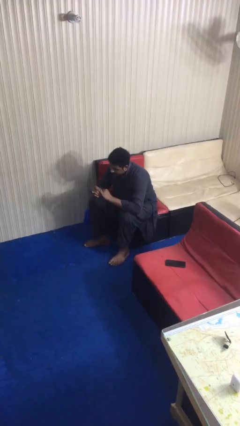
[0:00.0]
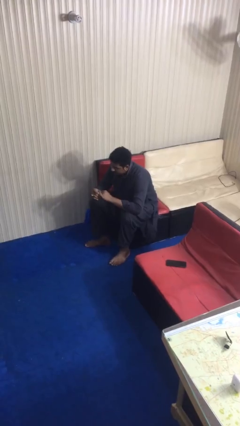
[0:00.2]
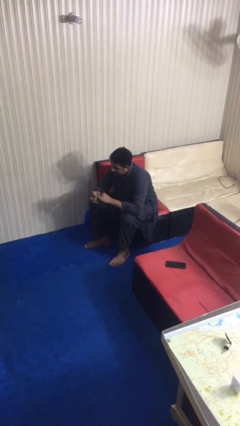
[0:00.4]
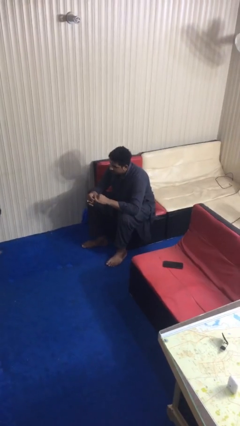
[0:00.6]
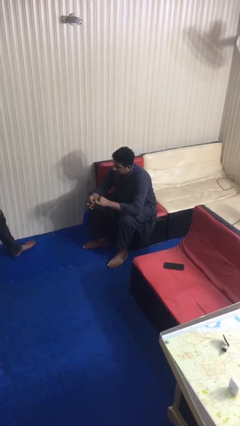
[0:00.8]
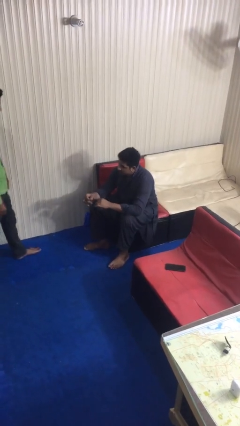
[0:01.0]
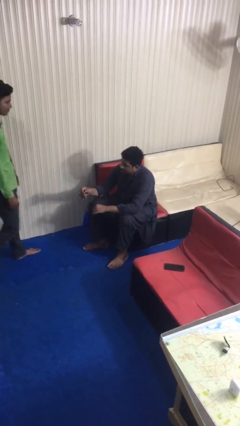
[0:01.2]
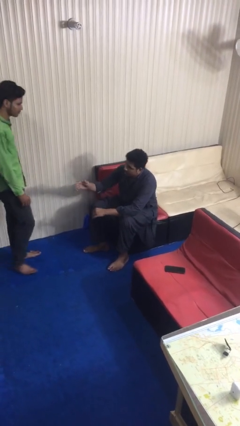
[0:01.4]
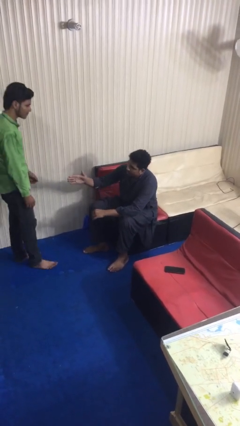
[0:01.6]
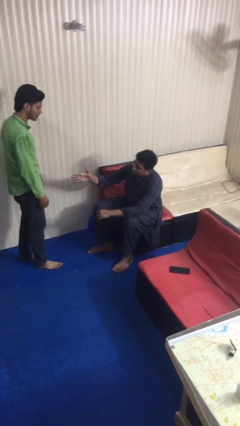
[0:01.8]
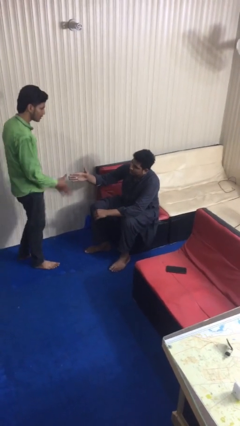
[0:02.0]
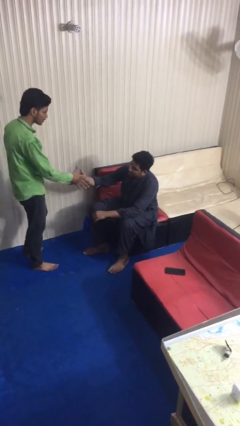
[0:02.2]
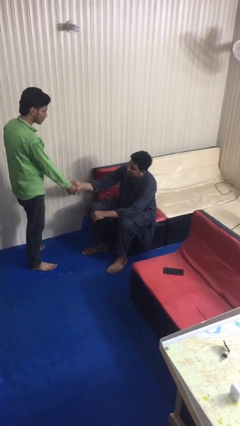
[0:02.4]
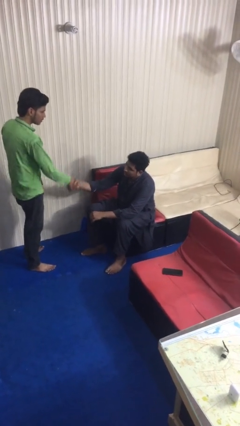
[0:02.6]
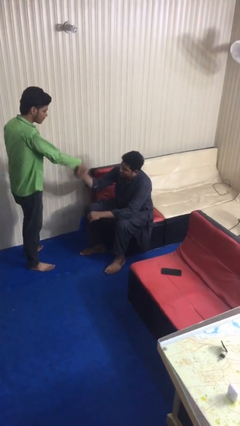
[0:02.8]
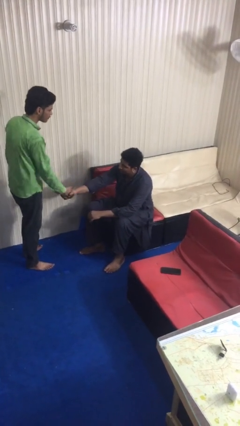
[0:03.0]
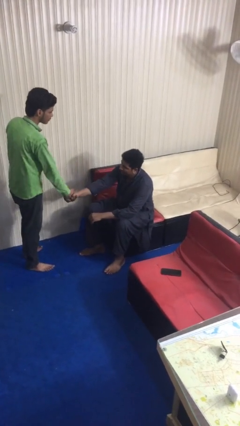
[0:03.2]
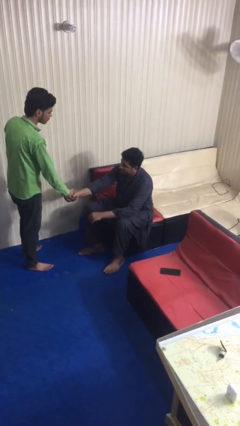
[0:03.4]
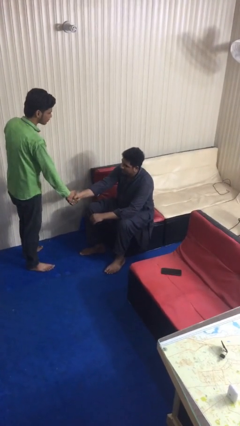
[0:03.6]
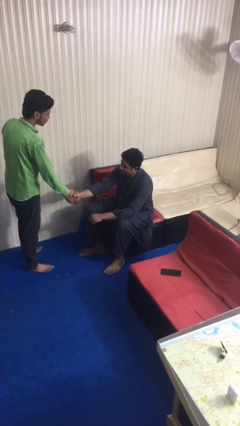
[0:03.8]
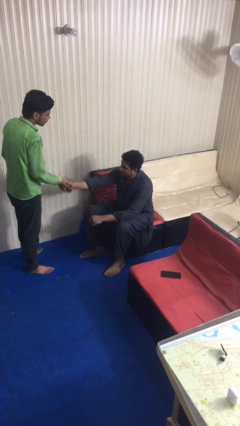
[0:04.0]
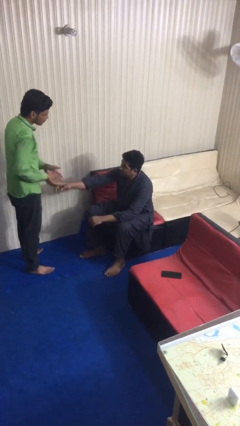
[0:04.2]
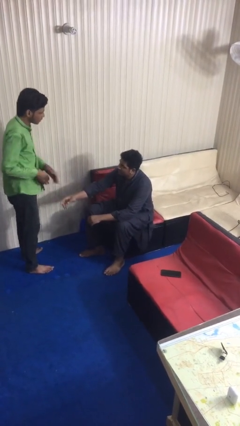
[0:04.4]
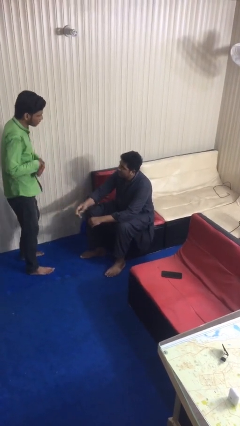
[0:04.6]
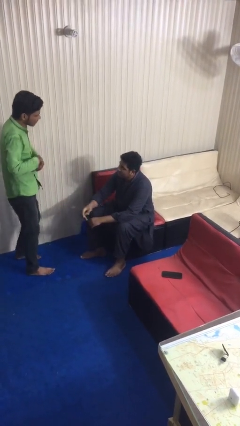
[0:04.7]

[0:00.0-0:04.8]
person shakes hand

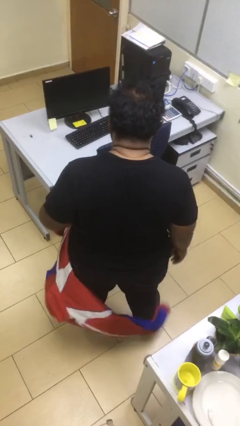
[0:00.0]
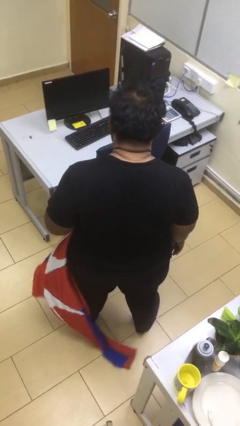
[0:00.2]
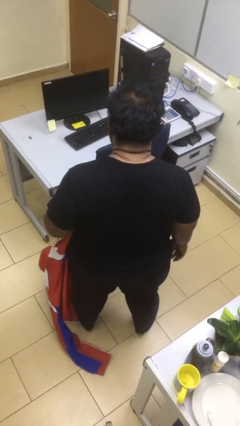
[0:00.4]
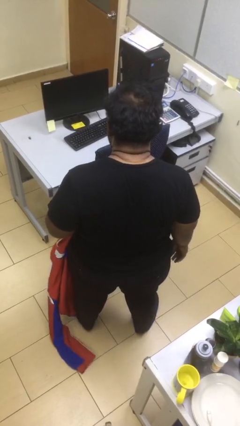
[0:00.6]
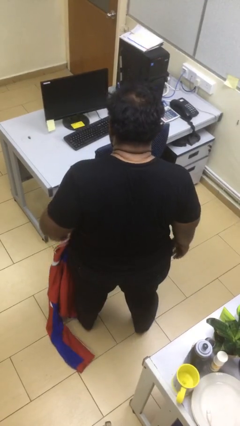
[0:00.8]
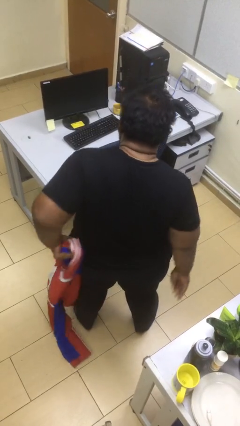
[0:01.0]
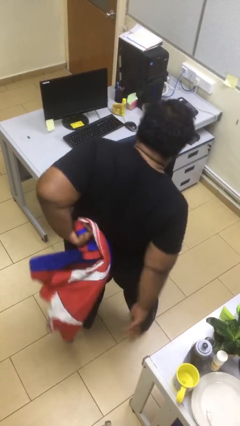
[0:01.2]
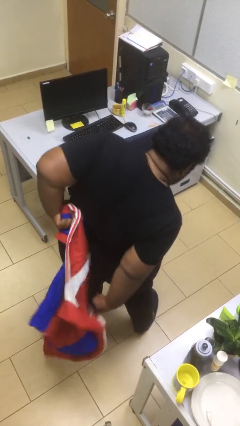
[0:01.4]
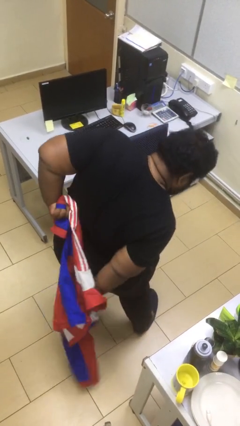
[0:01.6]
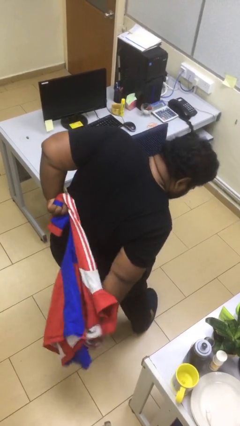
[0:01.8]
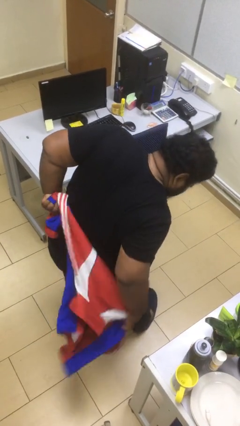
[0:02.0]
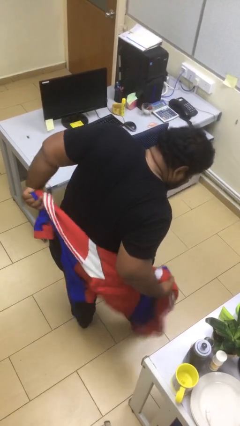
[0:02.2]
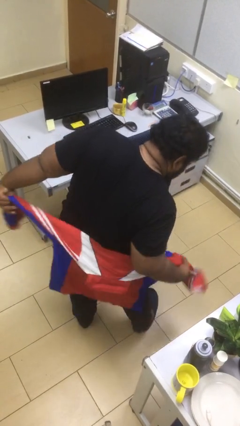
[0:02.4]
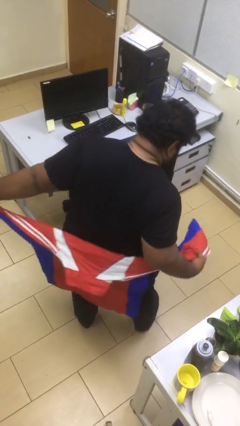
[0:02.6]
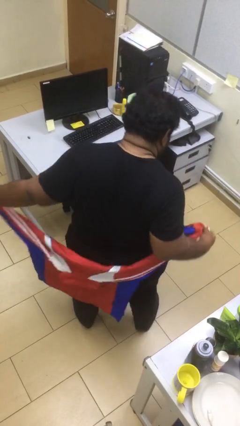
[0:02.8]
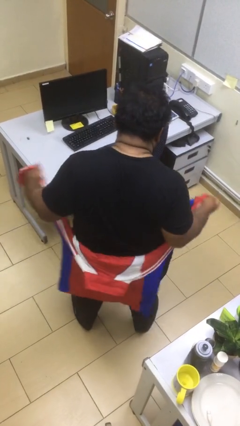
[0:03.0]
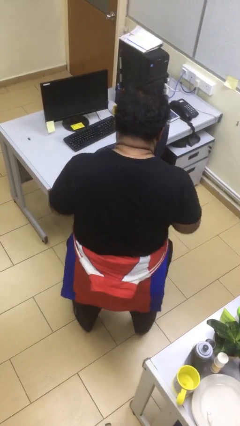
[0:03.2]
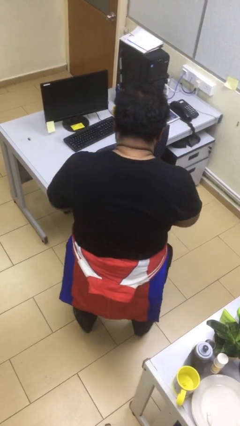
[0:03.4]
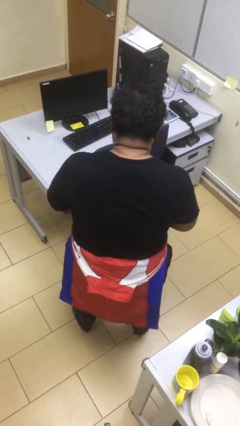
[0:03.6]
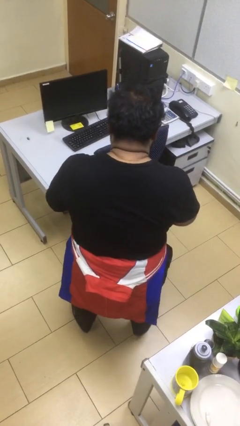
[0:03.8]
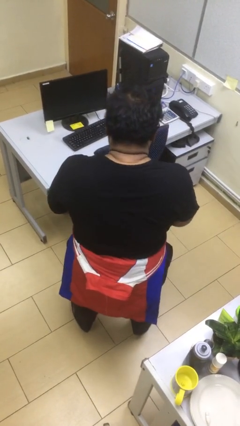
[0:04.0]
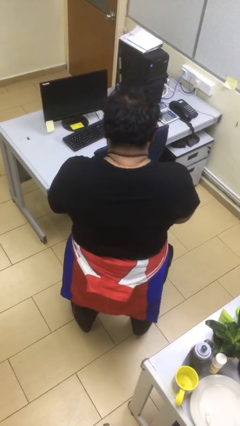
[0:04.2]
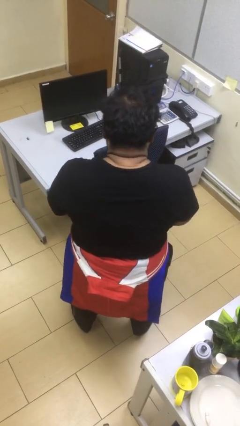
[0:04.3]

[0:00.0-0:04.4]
person ties jacket around waist

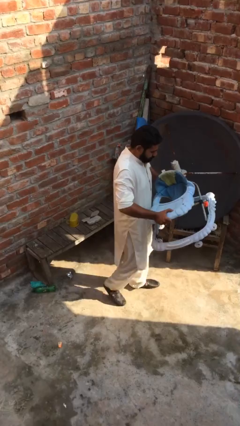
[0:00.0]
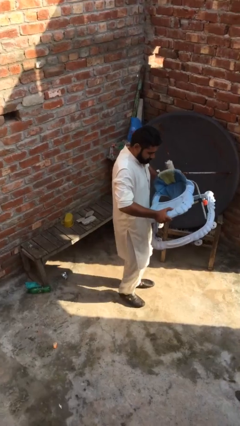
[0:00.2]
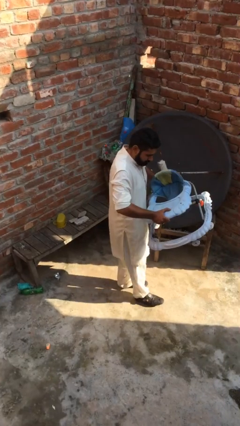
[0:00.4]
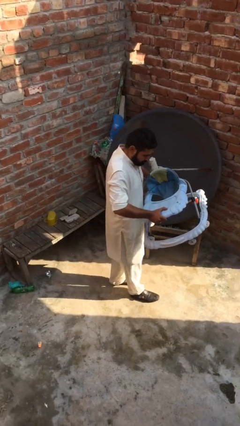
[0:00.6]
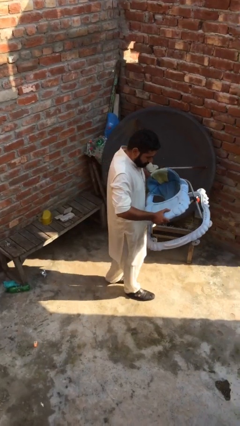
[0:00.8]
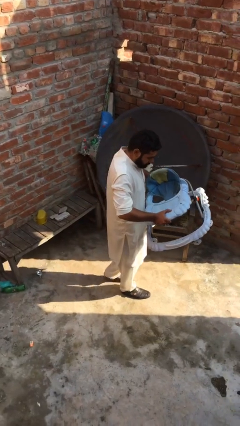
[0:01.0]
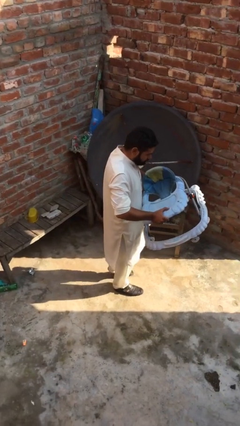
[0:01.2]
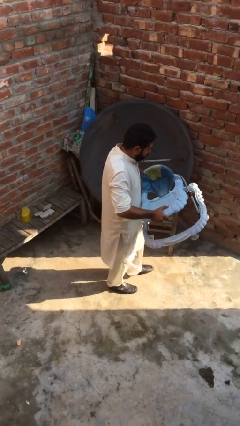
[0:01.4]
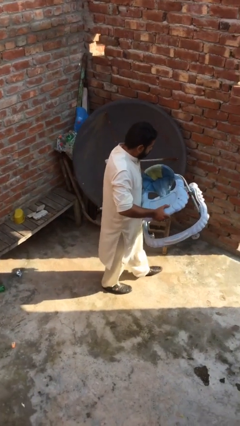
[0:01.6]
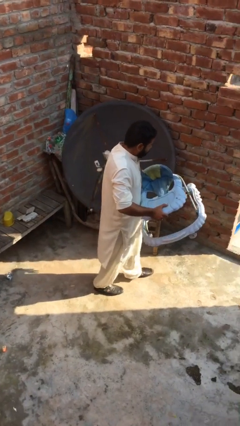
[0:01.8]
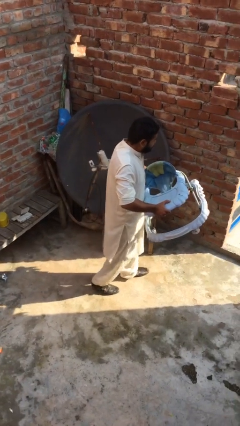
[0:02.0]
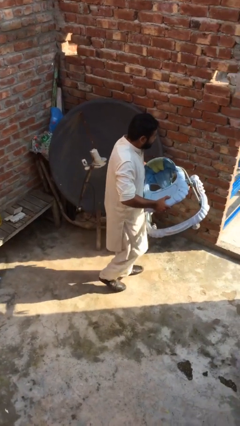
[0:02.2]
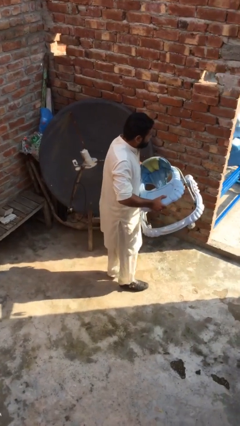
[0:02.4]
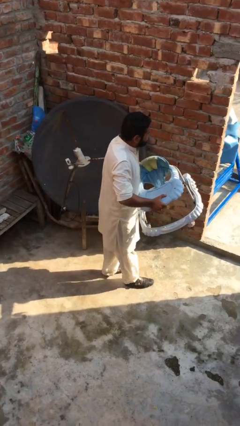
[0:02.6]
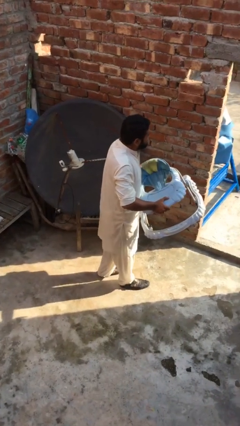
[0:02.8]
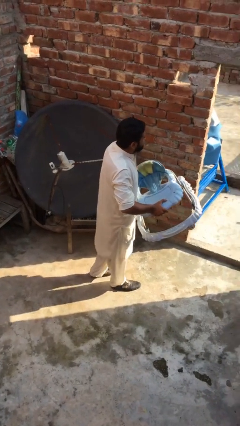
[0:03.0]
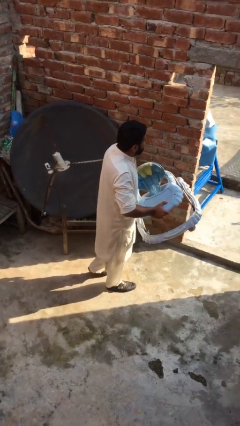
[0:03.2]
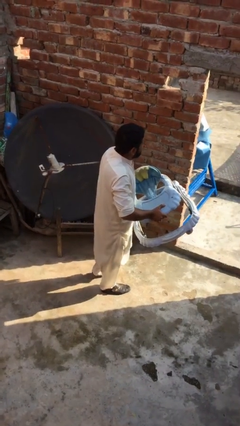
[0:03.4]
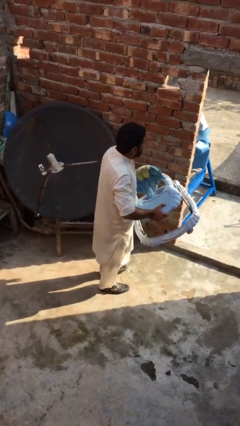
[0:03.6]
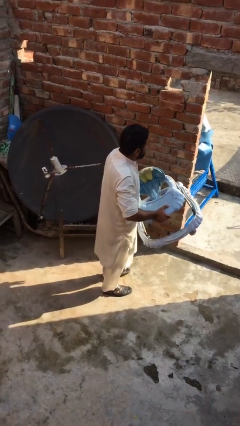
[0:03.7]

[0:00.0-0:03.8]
person carries heavy object

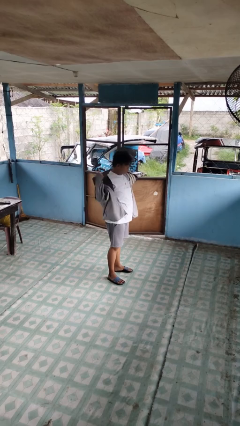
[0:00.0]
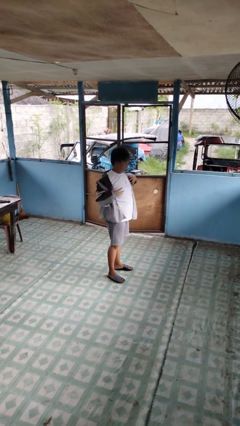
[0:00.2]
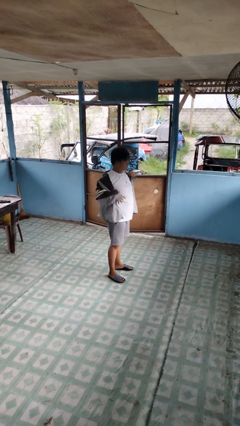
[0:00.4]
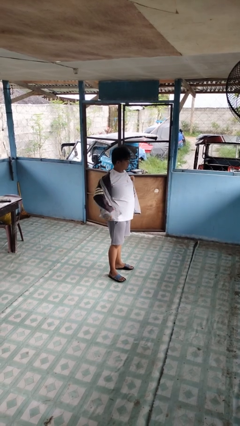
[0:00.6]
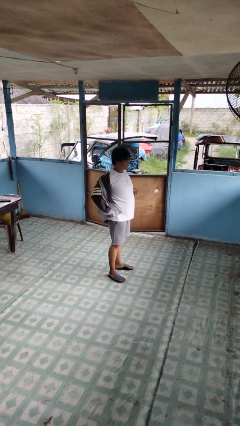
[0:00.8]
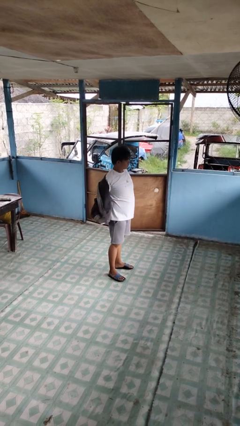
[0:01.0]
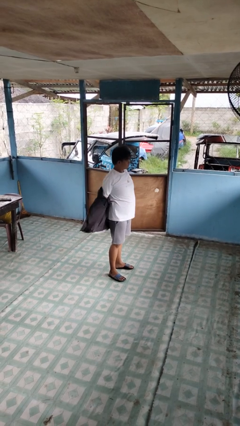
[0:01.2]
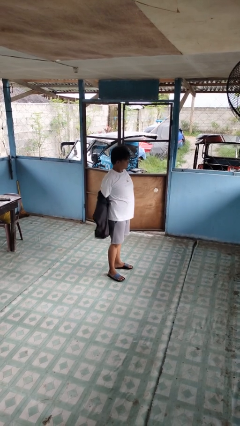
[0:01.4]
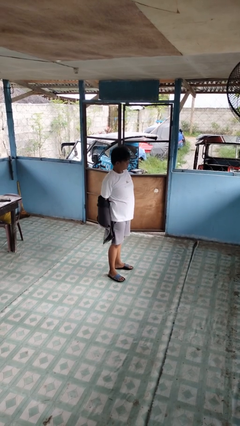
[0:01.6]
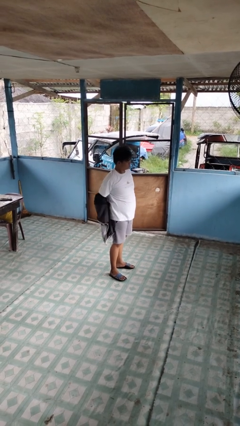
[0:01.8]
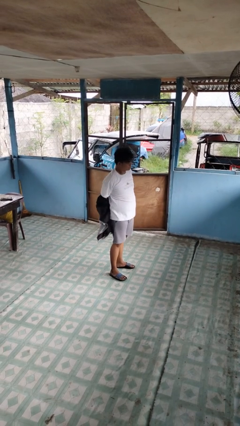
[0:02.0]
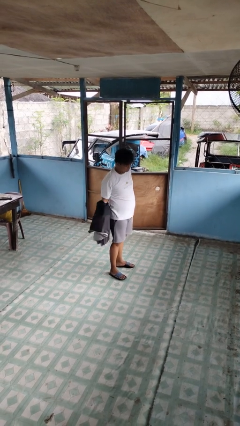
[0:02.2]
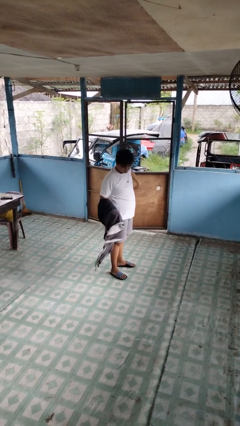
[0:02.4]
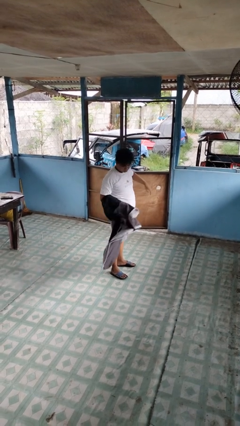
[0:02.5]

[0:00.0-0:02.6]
person takes off hoodie

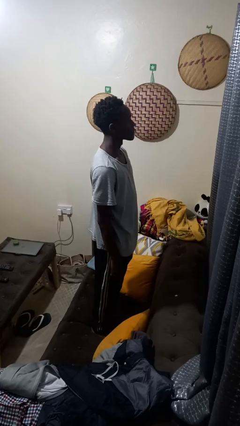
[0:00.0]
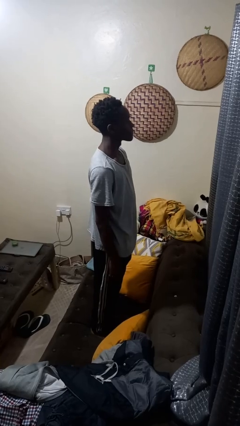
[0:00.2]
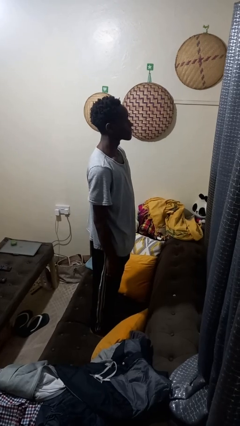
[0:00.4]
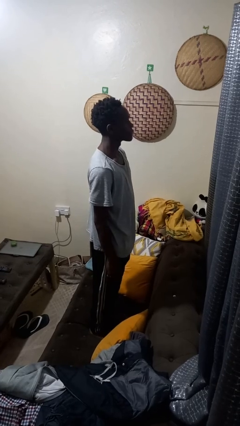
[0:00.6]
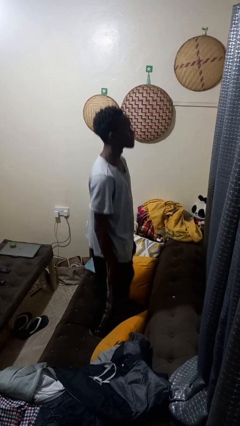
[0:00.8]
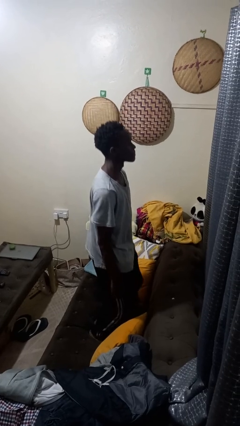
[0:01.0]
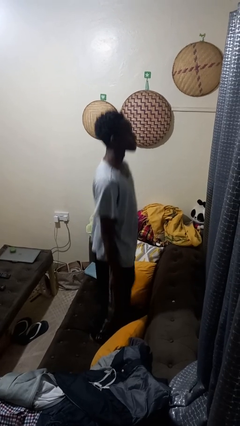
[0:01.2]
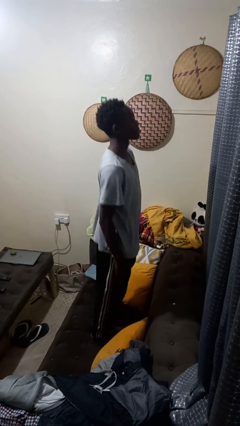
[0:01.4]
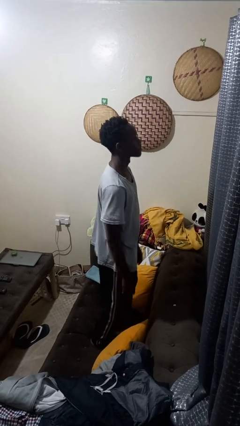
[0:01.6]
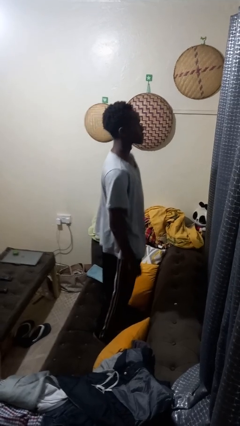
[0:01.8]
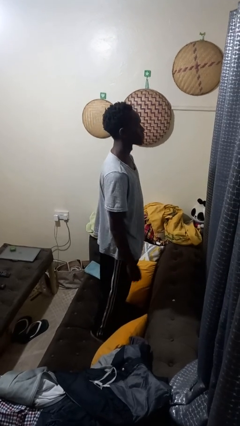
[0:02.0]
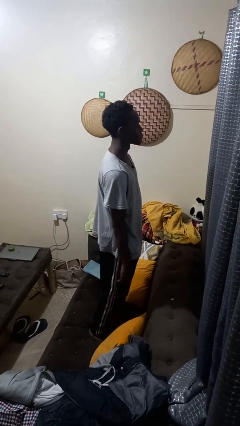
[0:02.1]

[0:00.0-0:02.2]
person jumps on couch

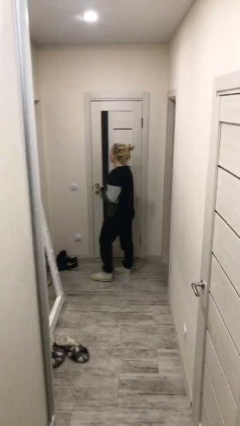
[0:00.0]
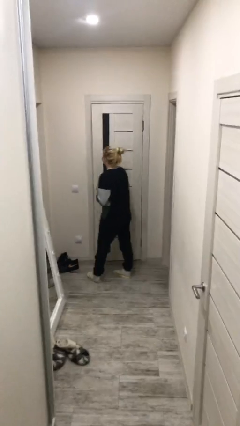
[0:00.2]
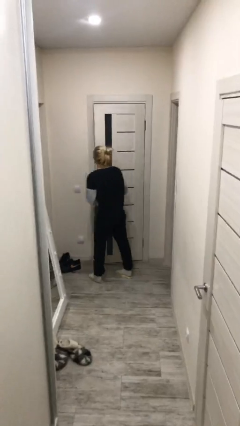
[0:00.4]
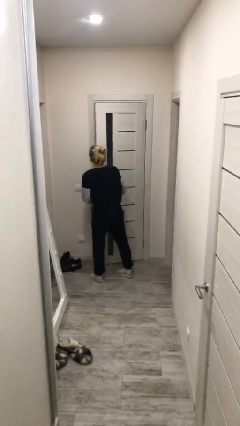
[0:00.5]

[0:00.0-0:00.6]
person opens facility door
